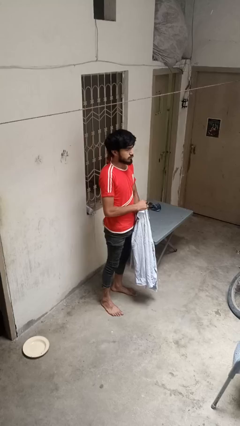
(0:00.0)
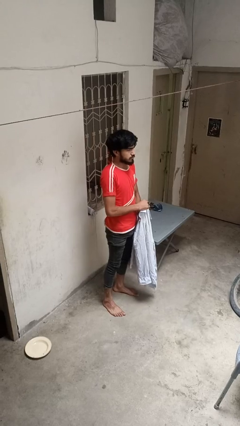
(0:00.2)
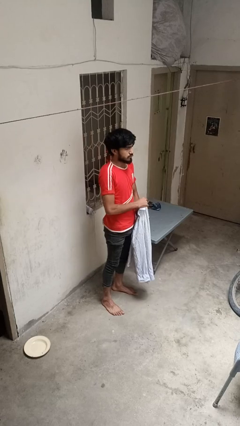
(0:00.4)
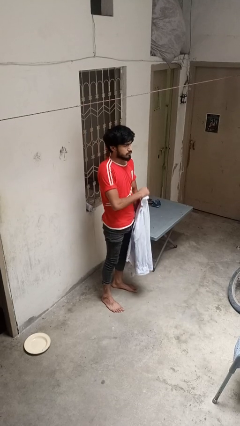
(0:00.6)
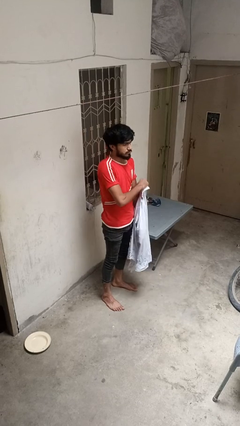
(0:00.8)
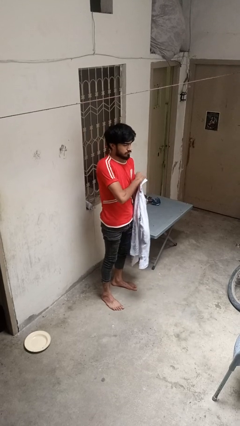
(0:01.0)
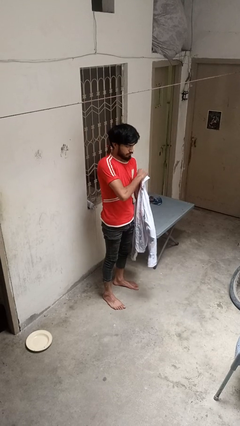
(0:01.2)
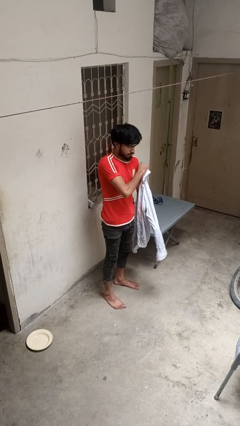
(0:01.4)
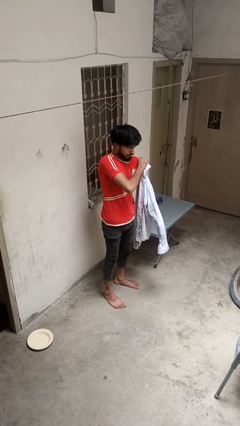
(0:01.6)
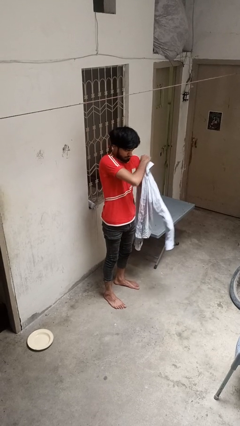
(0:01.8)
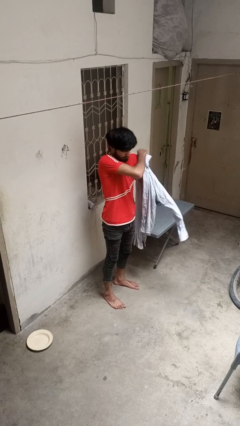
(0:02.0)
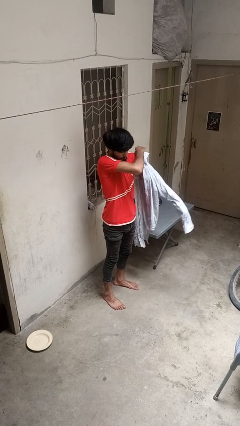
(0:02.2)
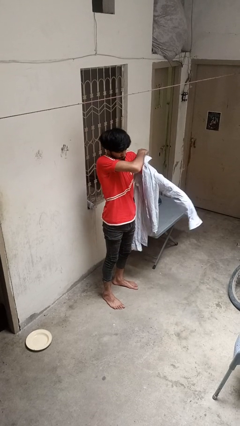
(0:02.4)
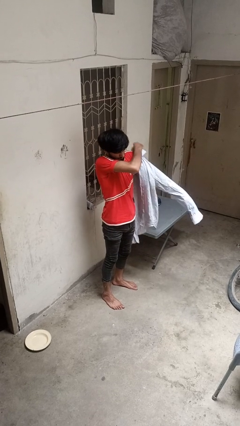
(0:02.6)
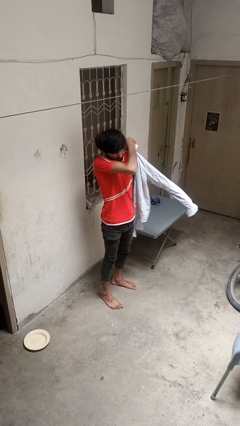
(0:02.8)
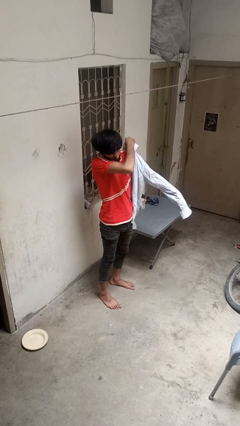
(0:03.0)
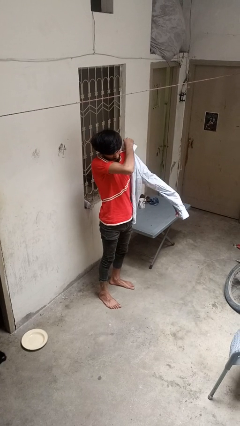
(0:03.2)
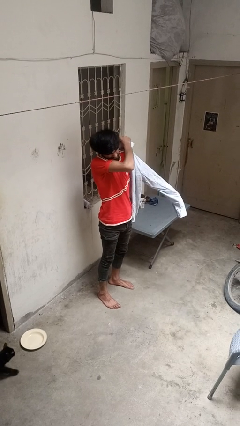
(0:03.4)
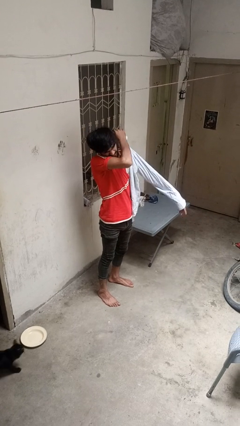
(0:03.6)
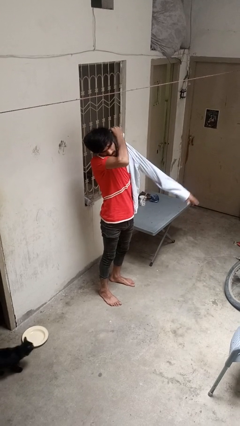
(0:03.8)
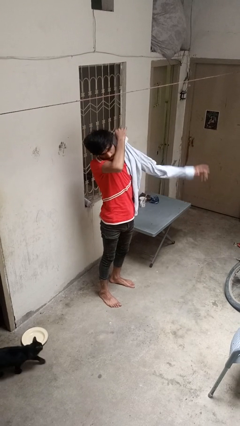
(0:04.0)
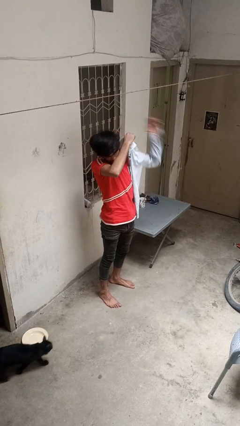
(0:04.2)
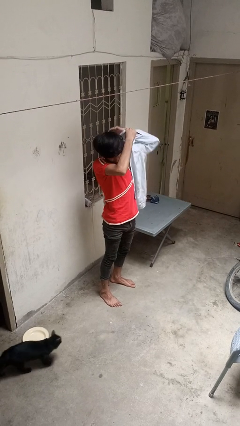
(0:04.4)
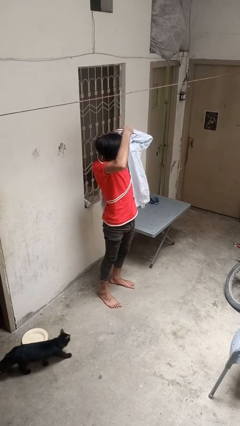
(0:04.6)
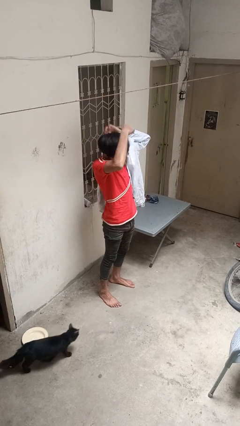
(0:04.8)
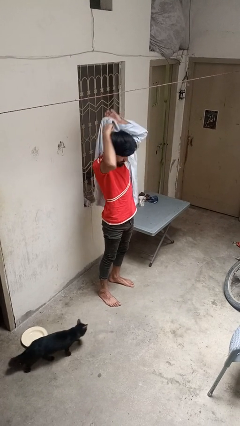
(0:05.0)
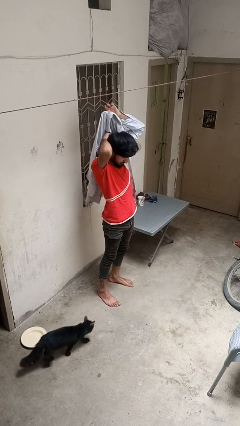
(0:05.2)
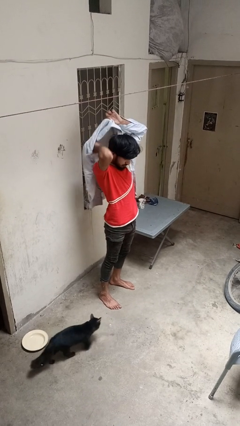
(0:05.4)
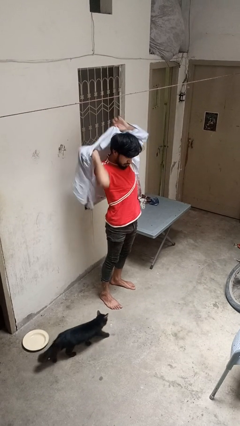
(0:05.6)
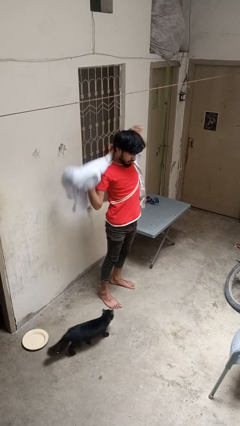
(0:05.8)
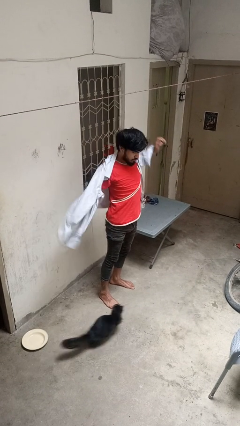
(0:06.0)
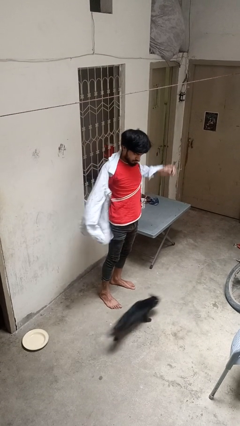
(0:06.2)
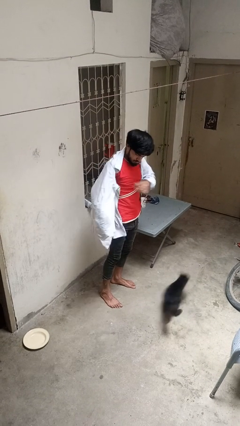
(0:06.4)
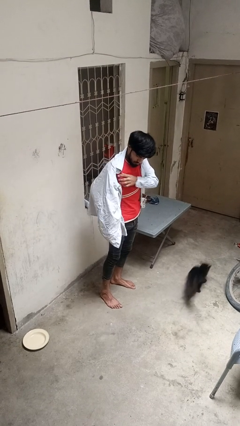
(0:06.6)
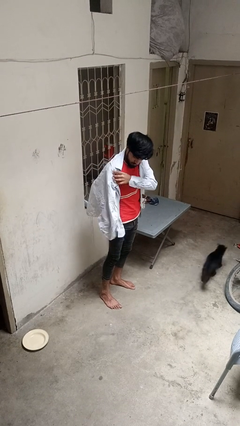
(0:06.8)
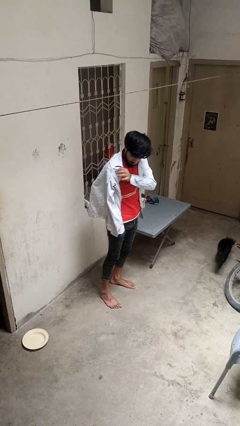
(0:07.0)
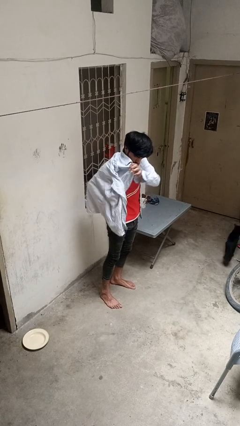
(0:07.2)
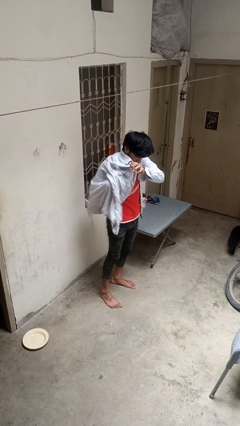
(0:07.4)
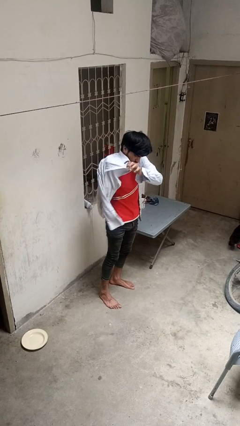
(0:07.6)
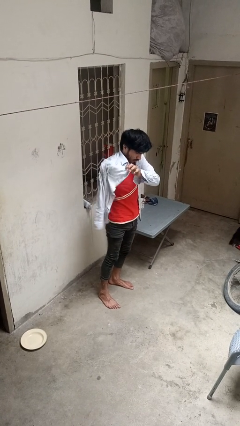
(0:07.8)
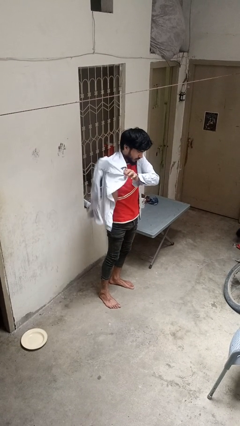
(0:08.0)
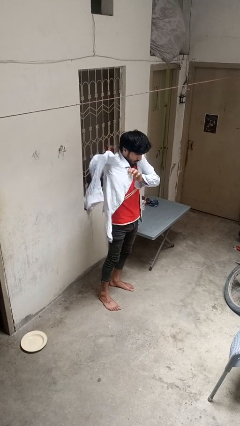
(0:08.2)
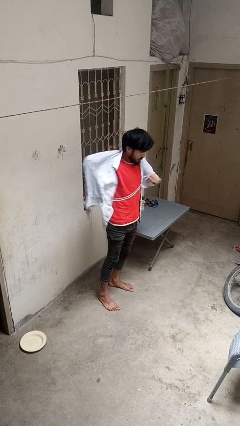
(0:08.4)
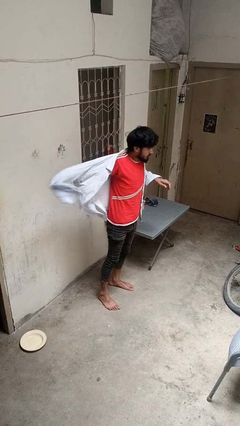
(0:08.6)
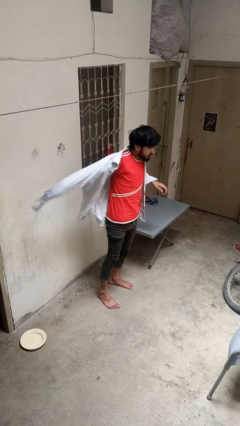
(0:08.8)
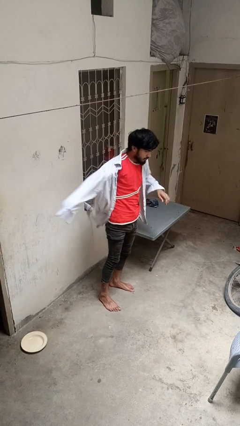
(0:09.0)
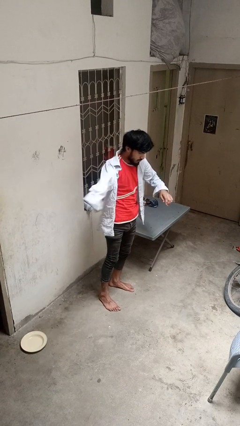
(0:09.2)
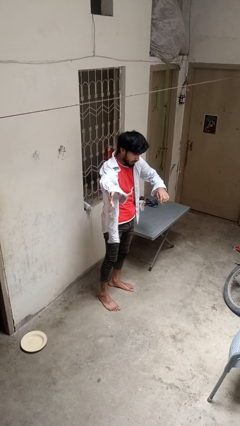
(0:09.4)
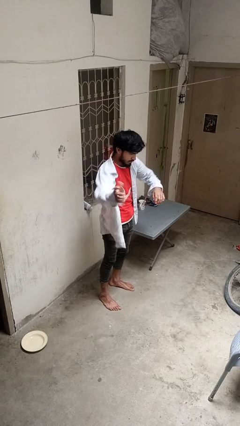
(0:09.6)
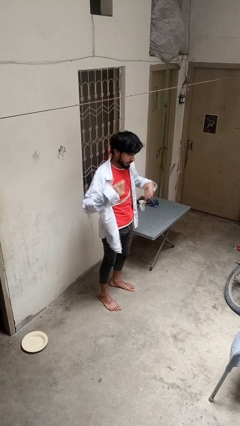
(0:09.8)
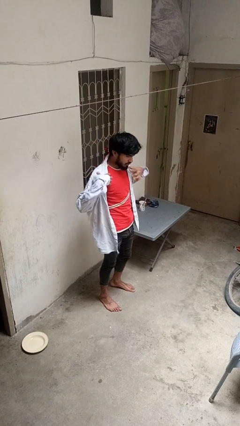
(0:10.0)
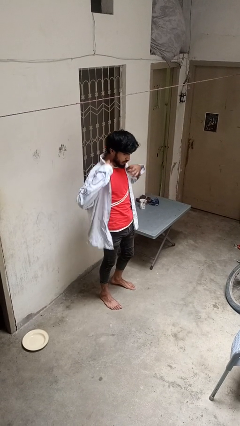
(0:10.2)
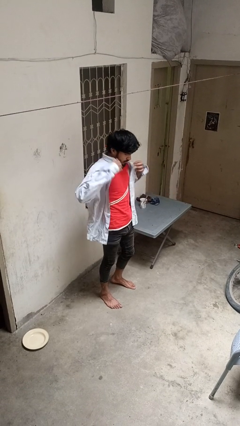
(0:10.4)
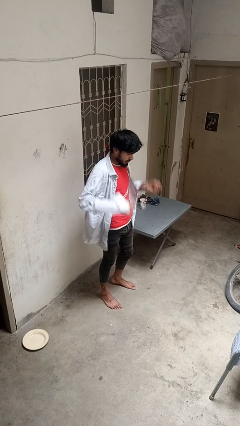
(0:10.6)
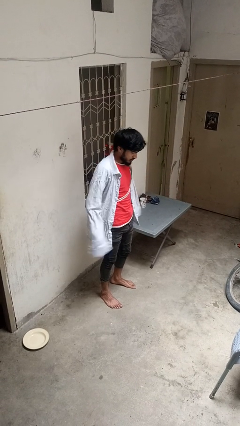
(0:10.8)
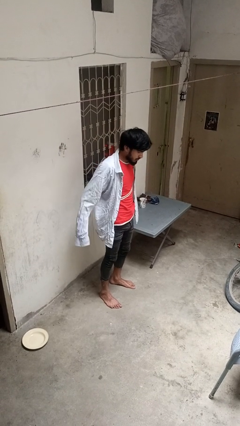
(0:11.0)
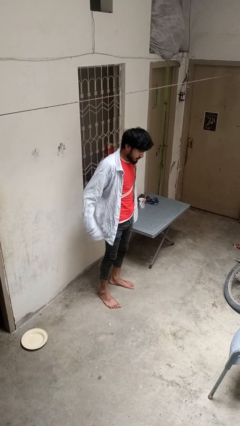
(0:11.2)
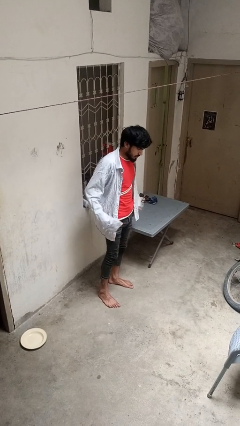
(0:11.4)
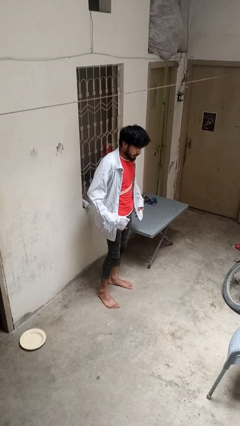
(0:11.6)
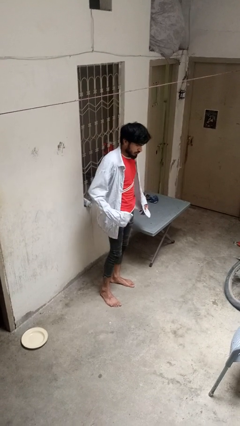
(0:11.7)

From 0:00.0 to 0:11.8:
person puts on shirt

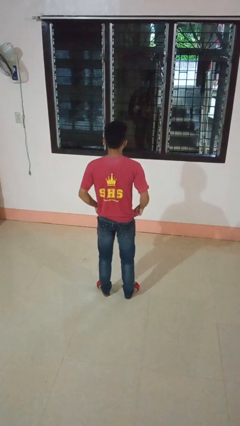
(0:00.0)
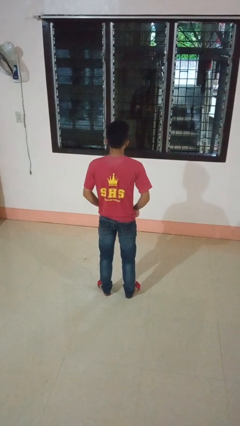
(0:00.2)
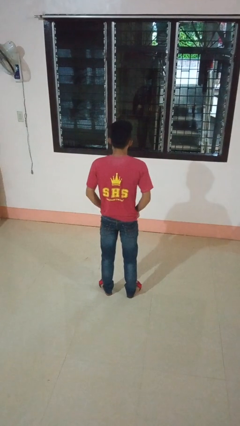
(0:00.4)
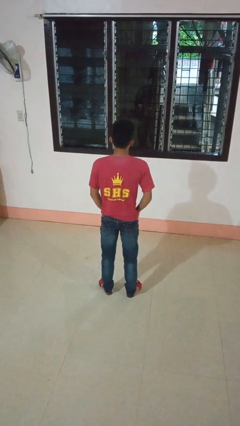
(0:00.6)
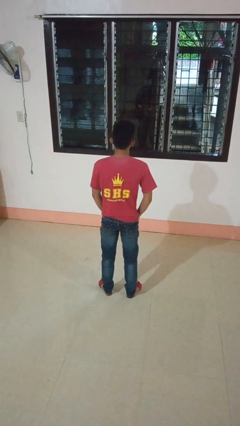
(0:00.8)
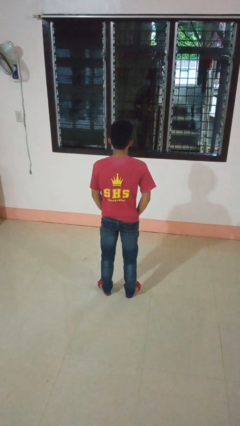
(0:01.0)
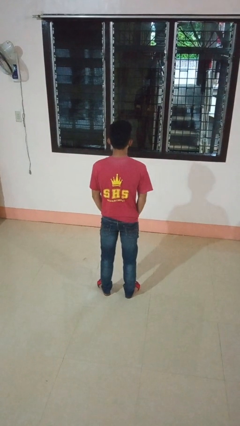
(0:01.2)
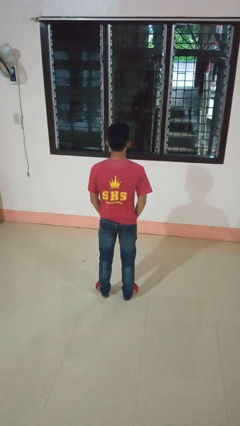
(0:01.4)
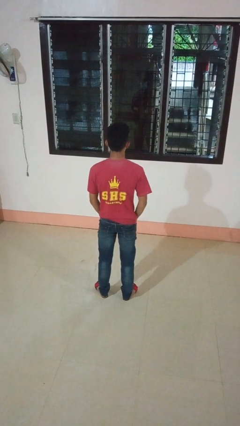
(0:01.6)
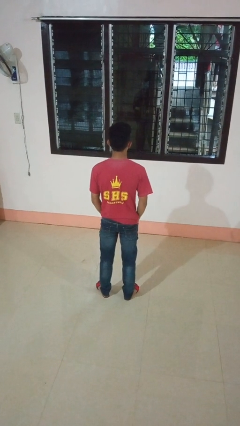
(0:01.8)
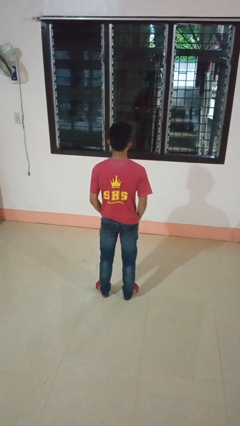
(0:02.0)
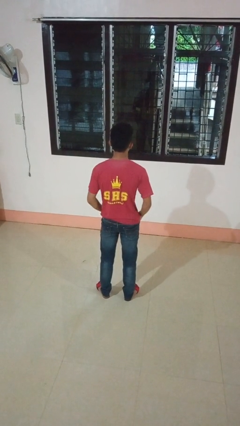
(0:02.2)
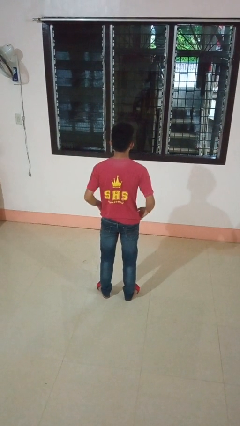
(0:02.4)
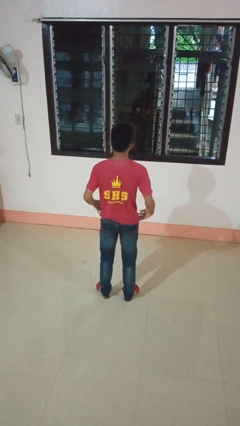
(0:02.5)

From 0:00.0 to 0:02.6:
person puts hands in back pockets

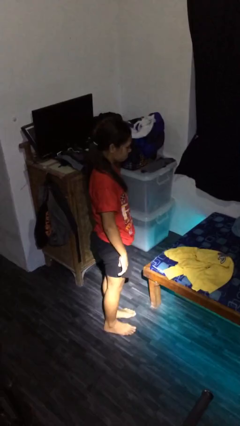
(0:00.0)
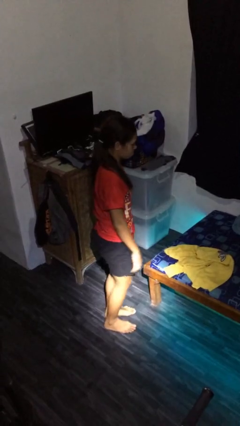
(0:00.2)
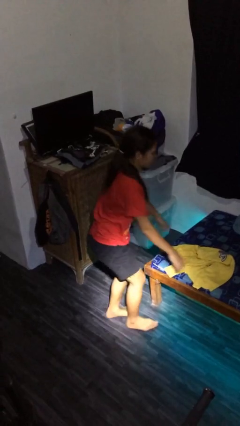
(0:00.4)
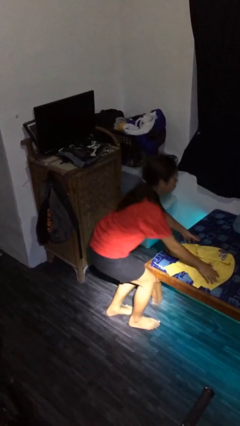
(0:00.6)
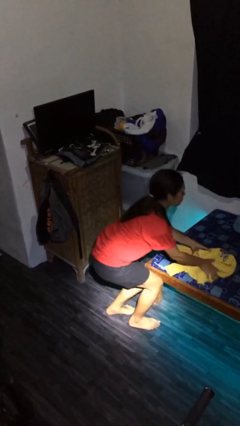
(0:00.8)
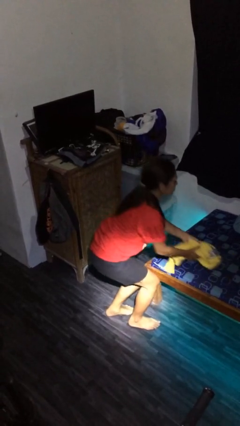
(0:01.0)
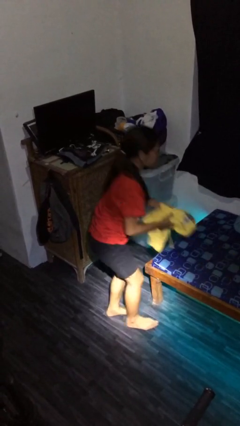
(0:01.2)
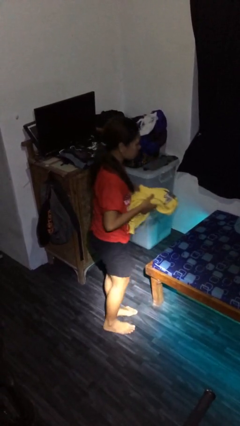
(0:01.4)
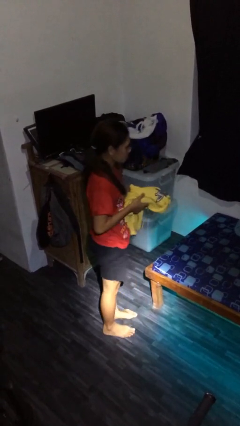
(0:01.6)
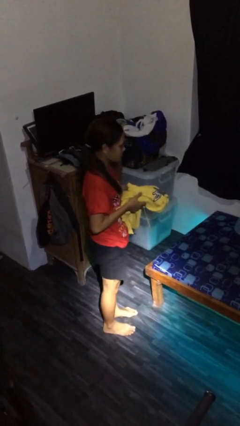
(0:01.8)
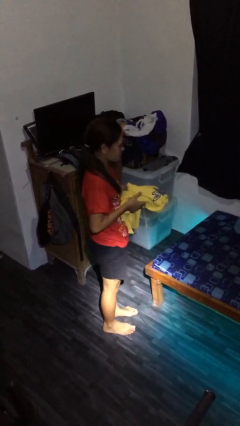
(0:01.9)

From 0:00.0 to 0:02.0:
person picks up object from bed

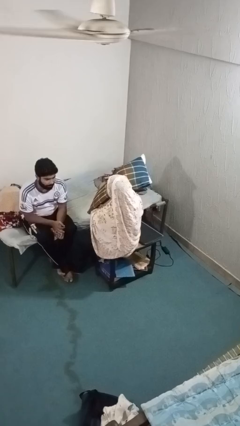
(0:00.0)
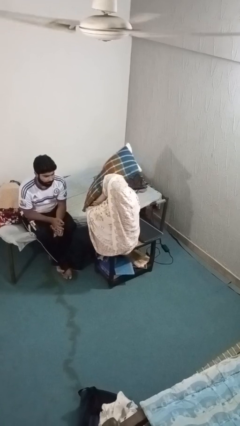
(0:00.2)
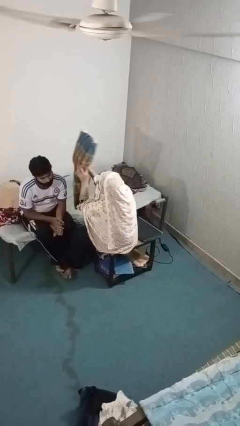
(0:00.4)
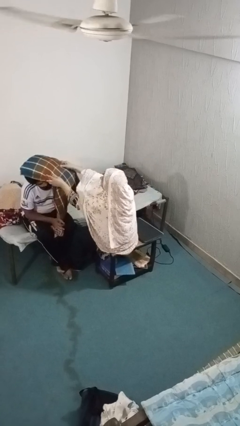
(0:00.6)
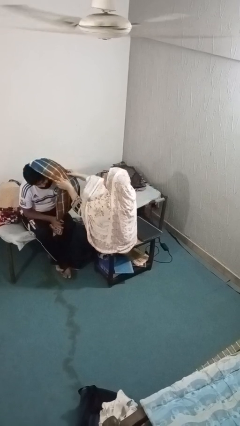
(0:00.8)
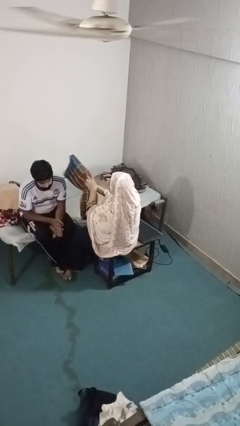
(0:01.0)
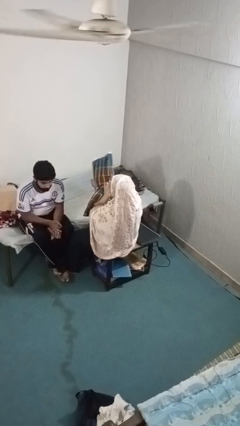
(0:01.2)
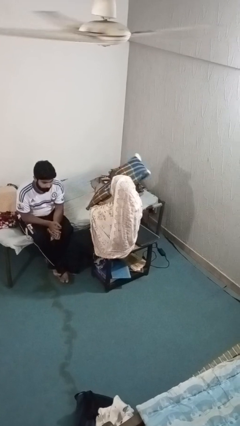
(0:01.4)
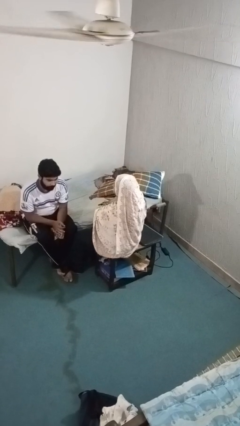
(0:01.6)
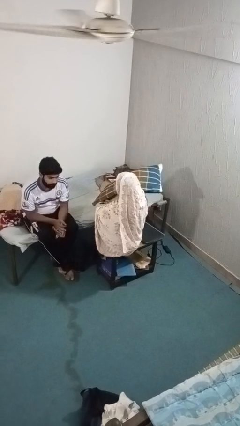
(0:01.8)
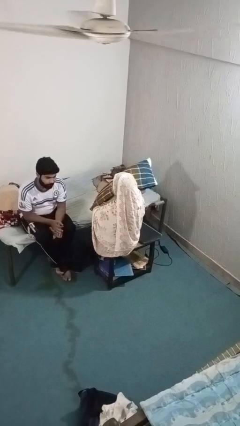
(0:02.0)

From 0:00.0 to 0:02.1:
person hits person with pillow
